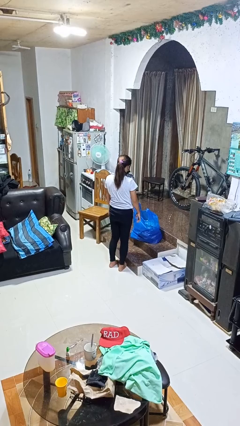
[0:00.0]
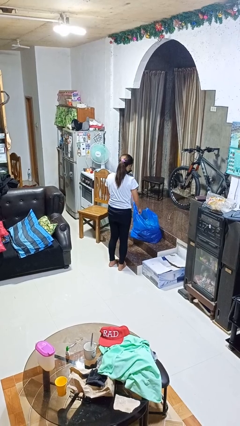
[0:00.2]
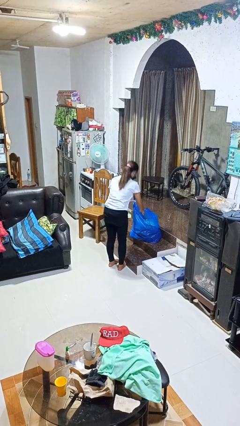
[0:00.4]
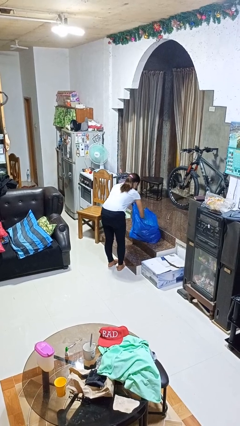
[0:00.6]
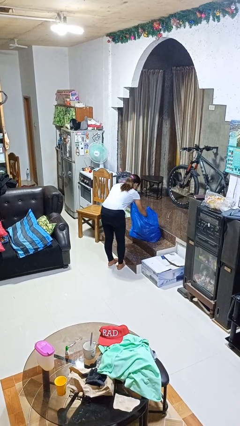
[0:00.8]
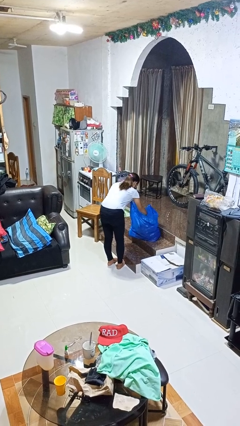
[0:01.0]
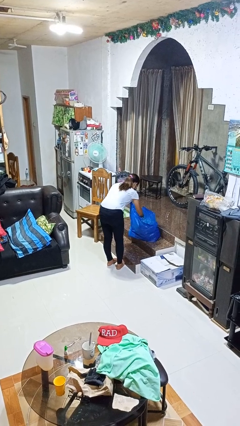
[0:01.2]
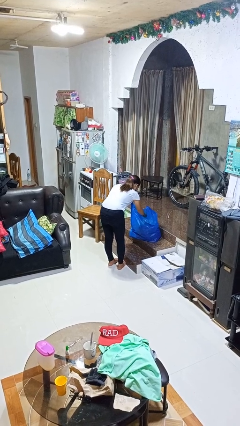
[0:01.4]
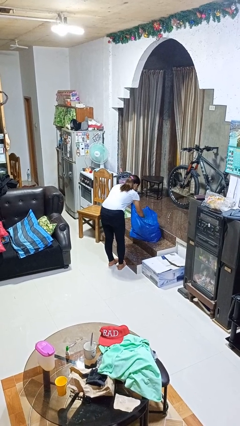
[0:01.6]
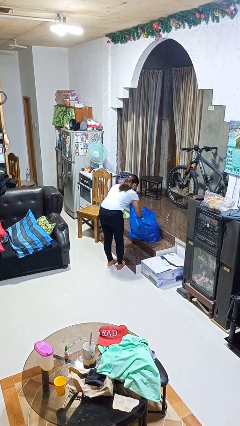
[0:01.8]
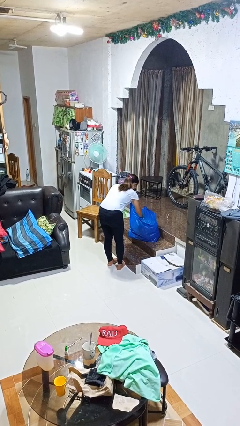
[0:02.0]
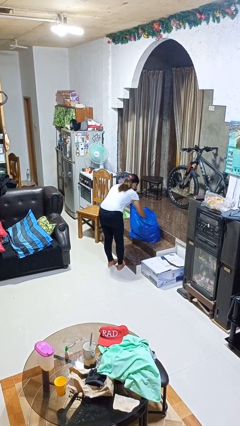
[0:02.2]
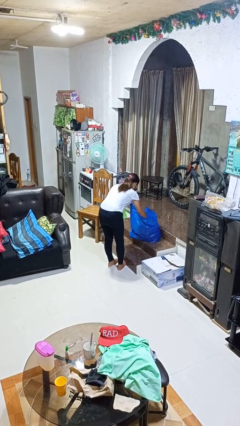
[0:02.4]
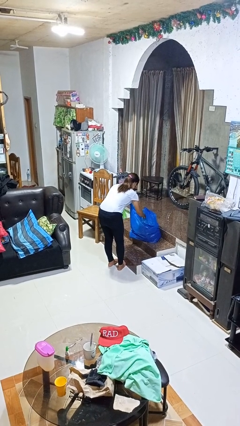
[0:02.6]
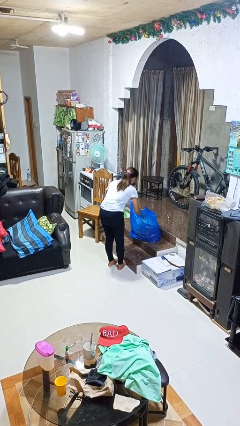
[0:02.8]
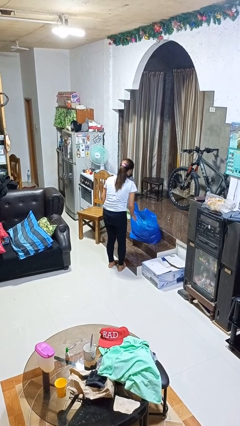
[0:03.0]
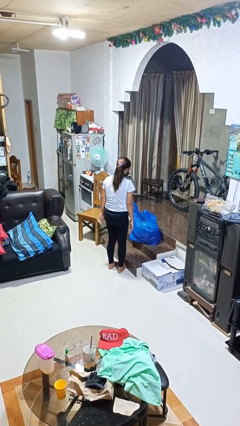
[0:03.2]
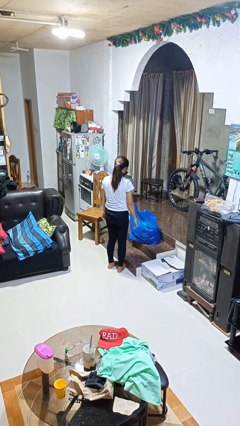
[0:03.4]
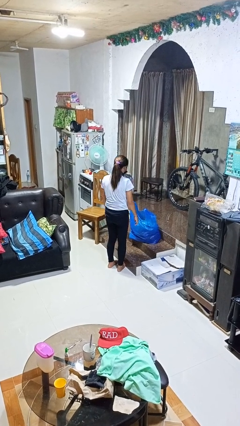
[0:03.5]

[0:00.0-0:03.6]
person searches in bag

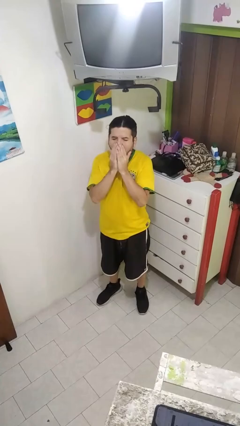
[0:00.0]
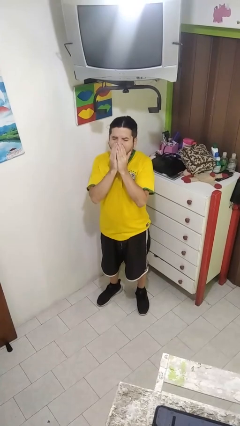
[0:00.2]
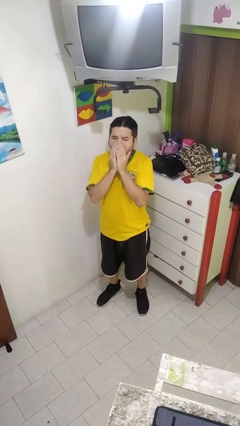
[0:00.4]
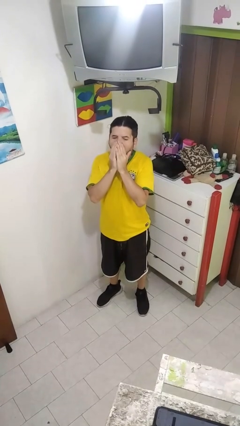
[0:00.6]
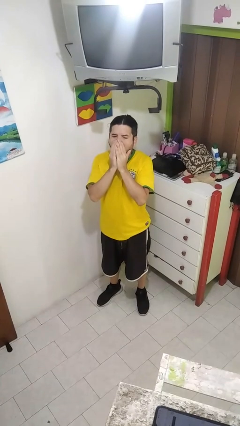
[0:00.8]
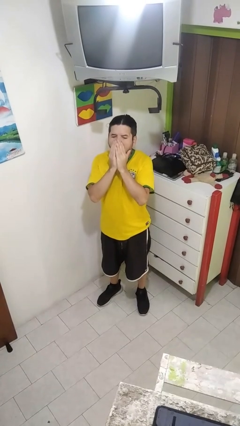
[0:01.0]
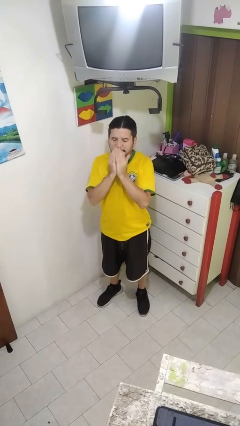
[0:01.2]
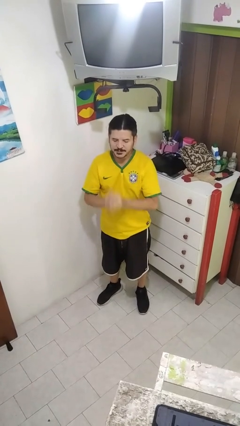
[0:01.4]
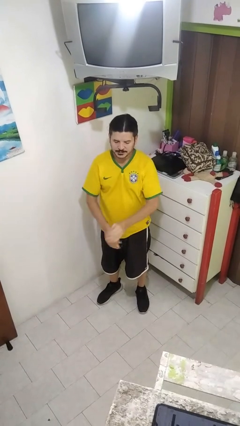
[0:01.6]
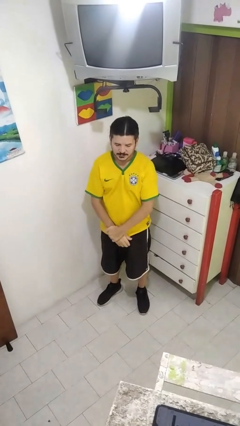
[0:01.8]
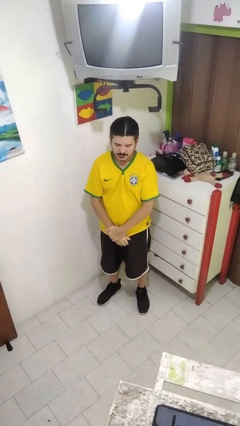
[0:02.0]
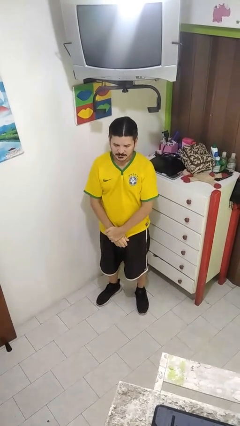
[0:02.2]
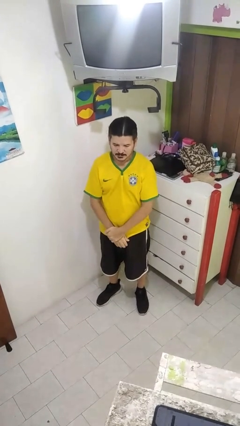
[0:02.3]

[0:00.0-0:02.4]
person yawns

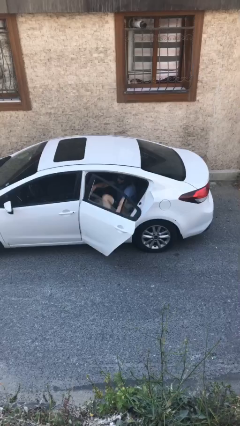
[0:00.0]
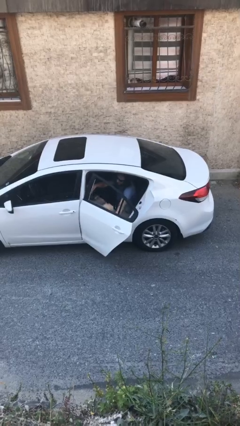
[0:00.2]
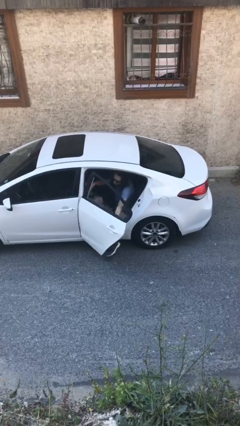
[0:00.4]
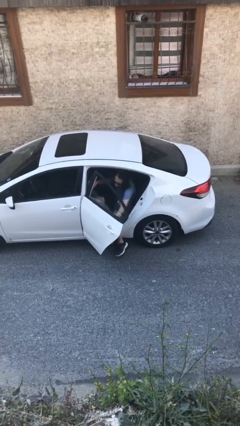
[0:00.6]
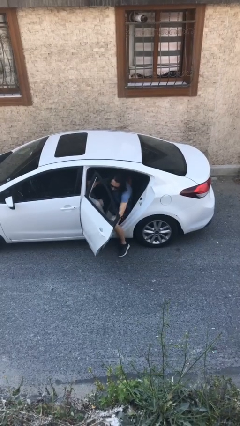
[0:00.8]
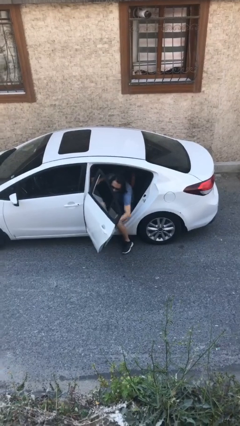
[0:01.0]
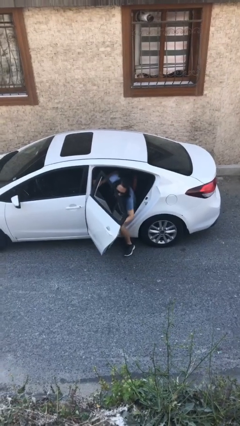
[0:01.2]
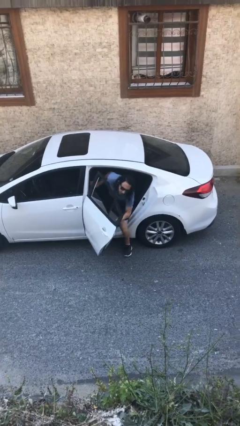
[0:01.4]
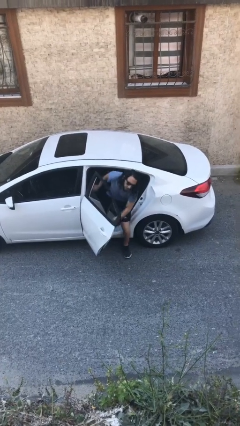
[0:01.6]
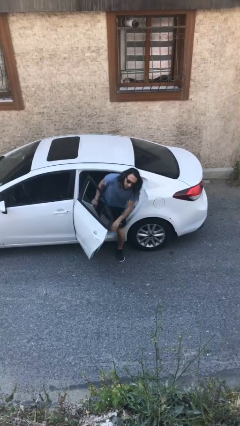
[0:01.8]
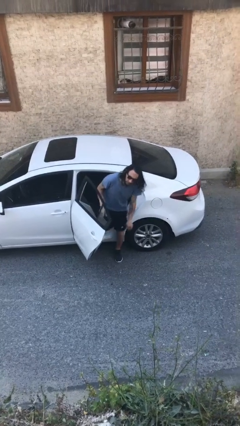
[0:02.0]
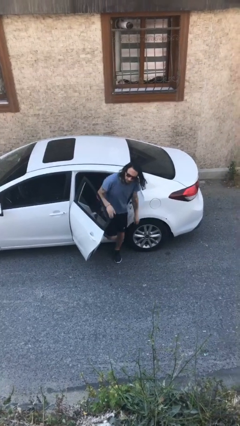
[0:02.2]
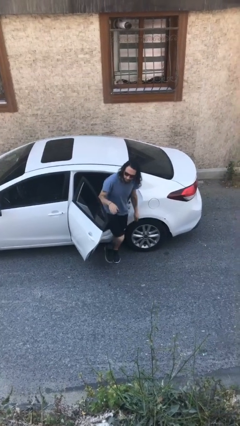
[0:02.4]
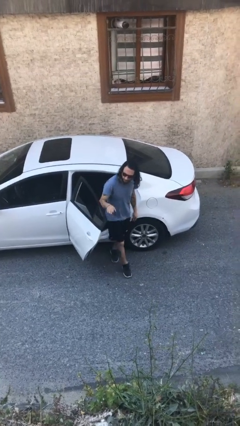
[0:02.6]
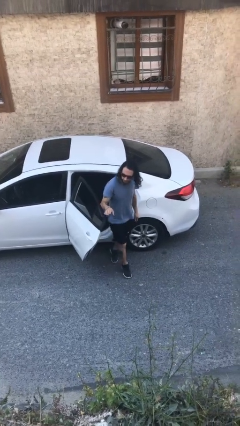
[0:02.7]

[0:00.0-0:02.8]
person exits car

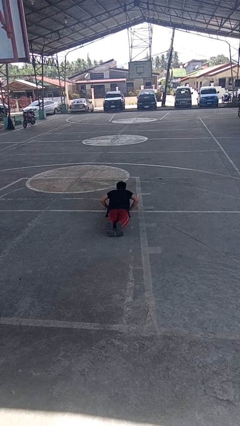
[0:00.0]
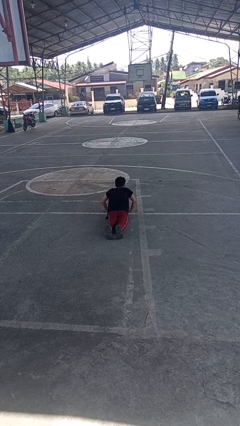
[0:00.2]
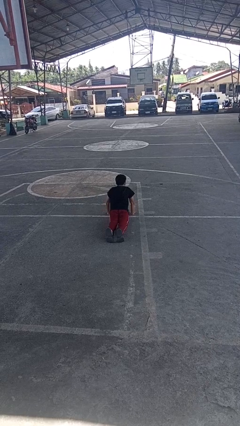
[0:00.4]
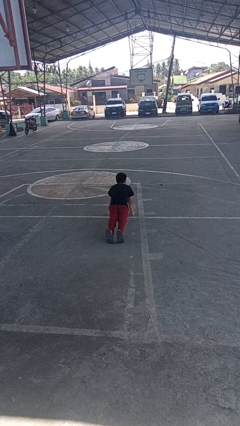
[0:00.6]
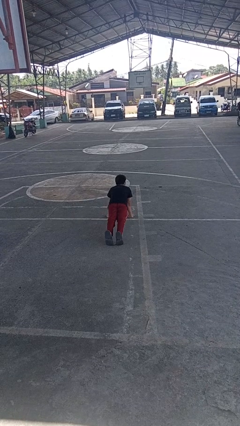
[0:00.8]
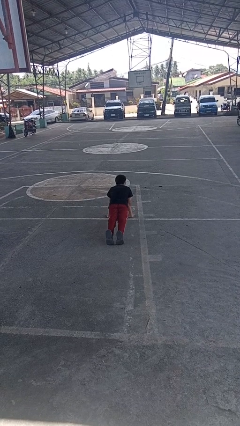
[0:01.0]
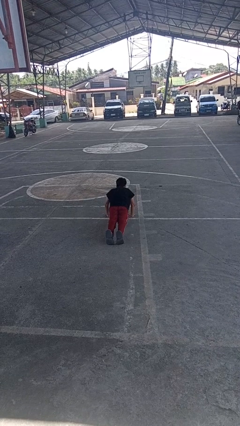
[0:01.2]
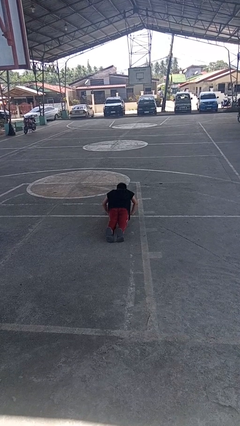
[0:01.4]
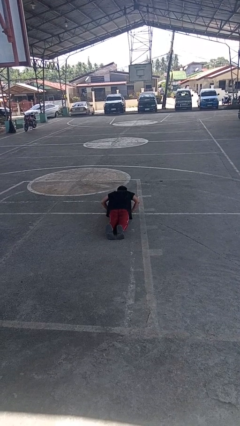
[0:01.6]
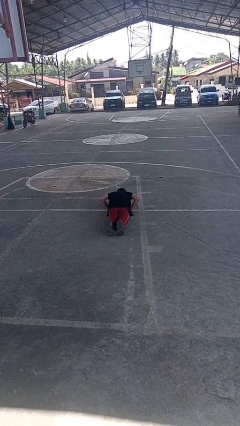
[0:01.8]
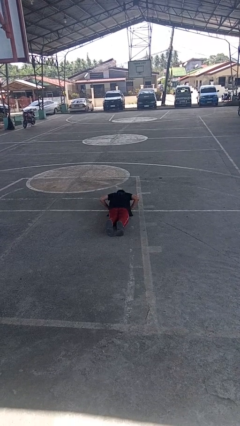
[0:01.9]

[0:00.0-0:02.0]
person exercises with pushup

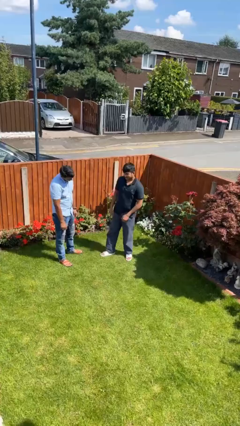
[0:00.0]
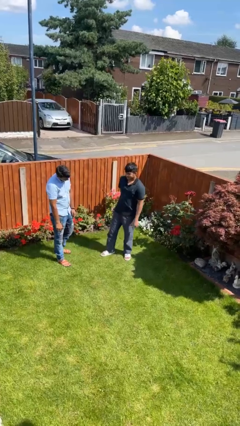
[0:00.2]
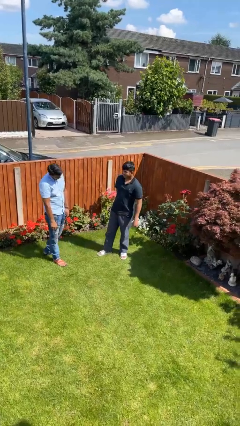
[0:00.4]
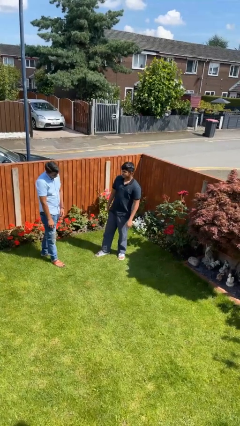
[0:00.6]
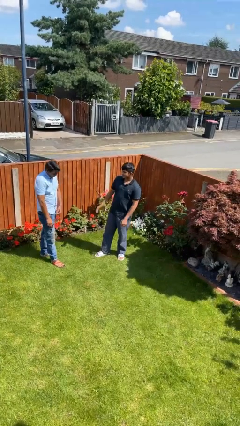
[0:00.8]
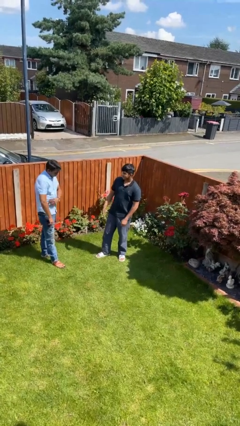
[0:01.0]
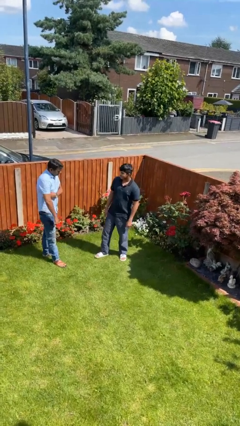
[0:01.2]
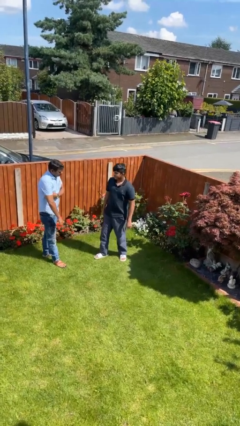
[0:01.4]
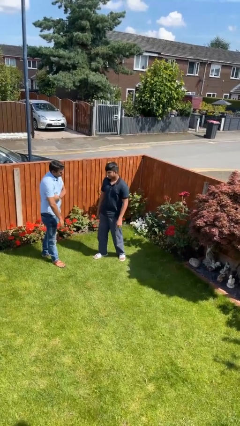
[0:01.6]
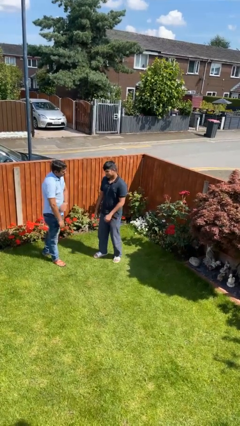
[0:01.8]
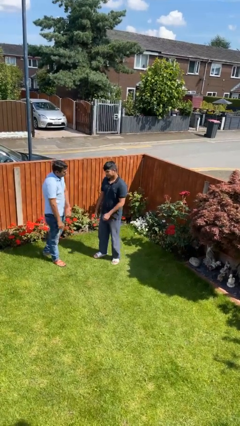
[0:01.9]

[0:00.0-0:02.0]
person shoves person

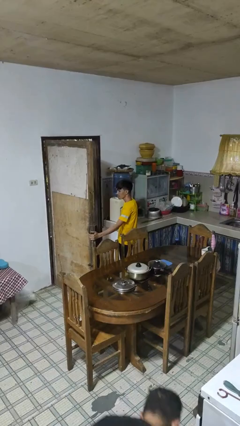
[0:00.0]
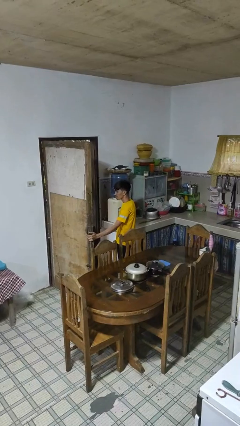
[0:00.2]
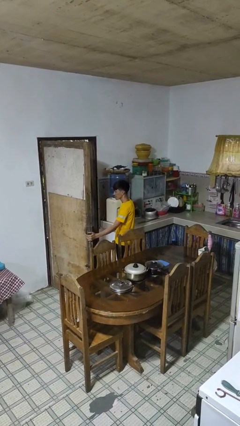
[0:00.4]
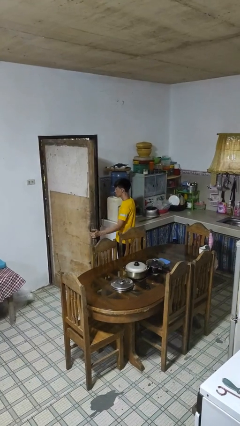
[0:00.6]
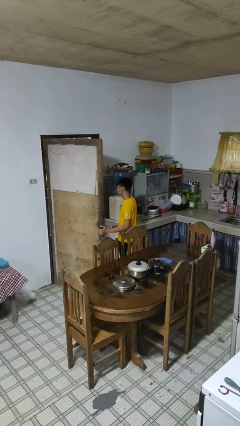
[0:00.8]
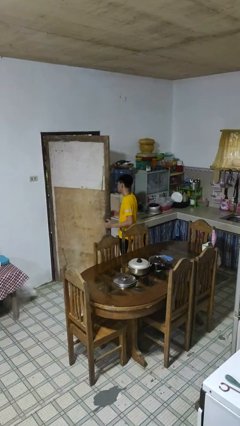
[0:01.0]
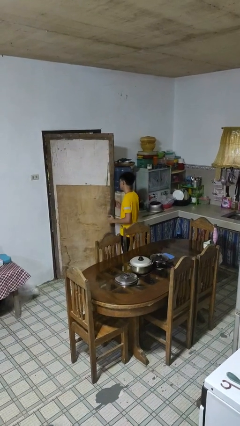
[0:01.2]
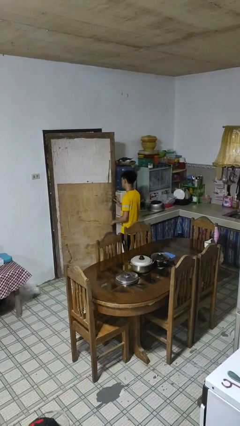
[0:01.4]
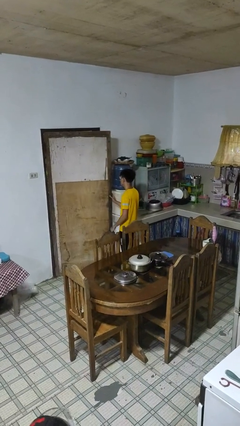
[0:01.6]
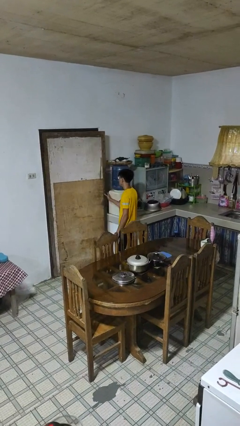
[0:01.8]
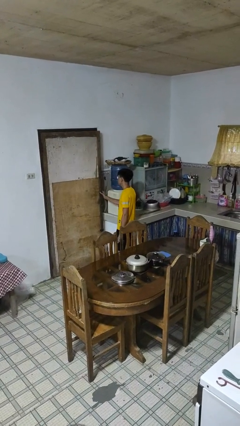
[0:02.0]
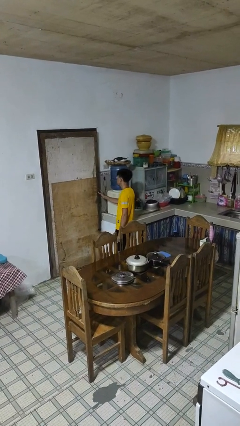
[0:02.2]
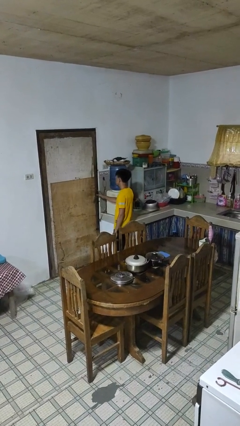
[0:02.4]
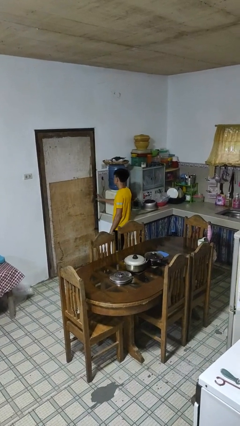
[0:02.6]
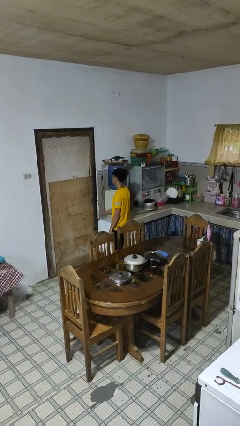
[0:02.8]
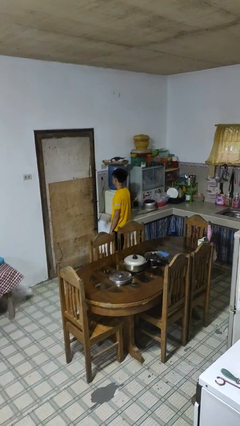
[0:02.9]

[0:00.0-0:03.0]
person closes facility door

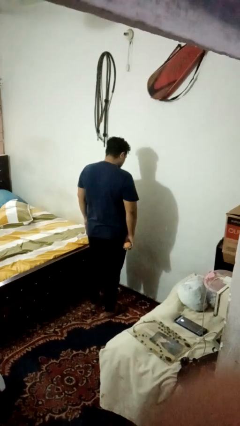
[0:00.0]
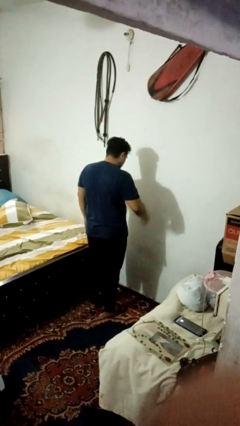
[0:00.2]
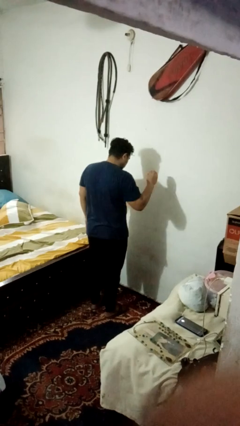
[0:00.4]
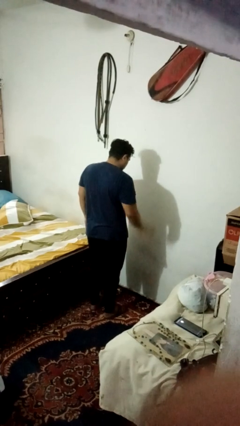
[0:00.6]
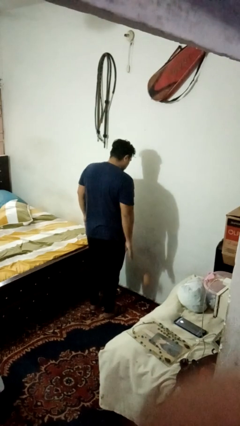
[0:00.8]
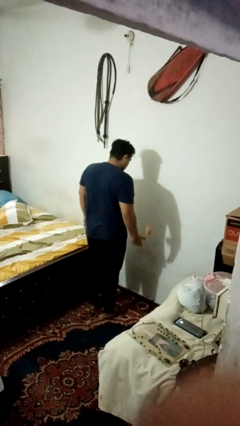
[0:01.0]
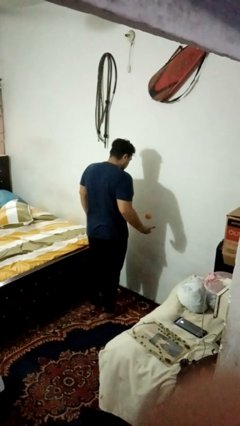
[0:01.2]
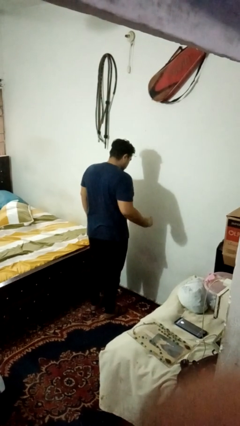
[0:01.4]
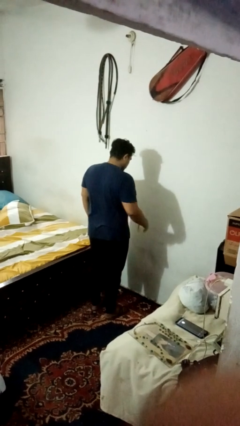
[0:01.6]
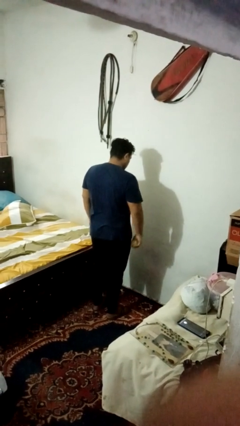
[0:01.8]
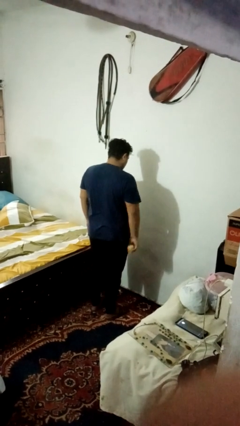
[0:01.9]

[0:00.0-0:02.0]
person bounces ball on floor
